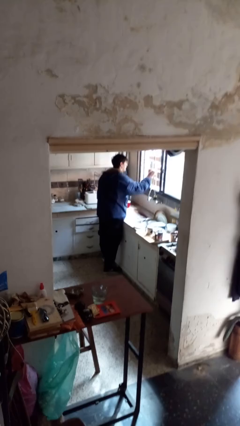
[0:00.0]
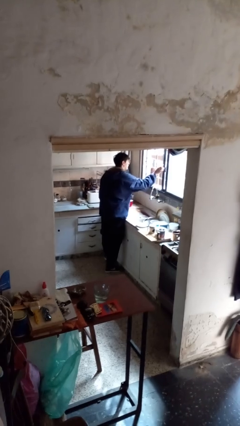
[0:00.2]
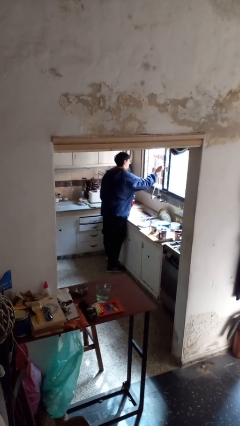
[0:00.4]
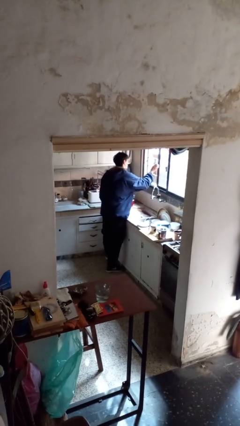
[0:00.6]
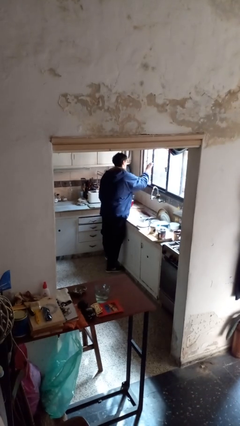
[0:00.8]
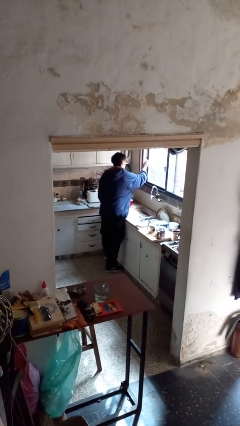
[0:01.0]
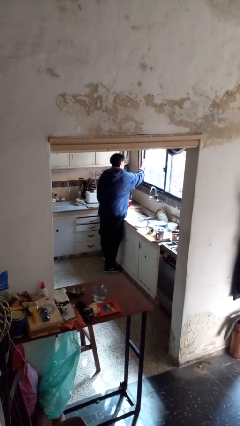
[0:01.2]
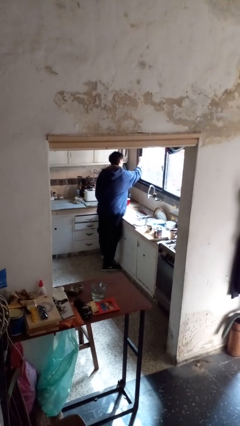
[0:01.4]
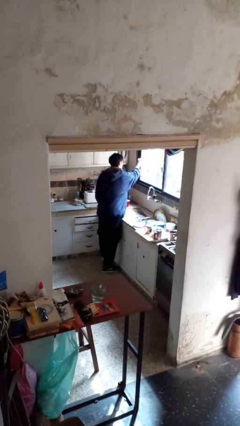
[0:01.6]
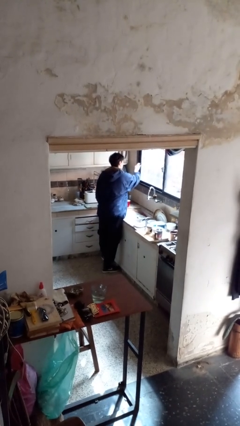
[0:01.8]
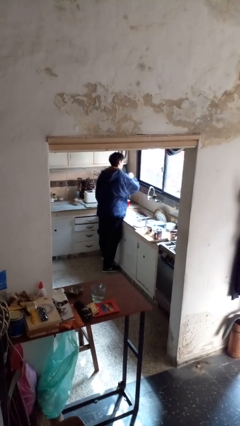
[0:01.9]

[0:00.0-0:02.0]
person closes home window

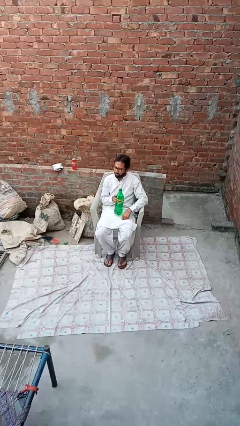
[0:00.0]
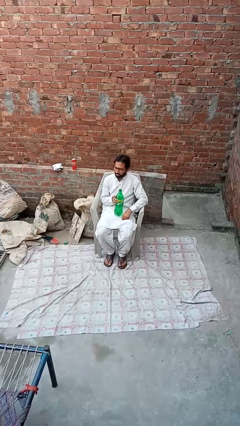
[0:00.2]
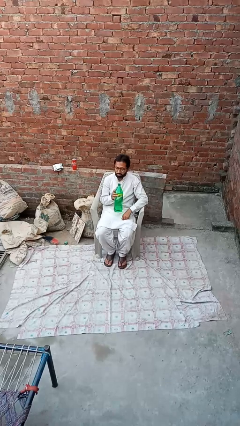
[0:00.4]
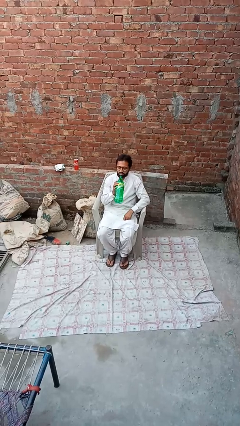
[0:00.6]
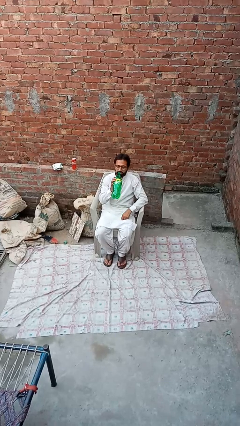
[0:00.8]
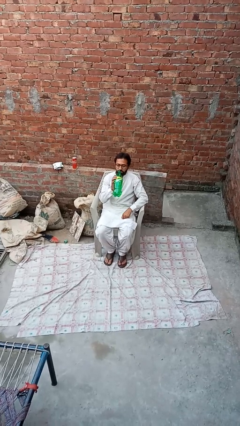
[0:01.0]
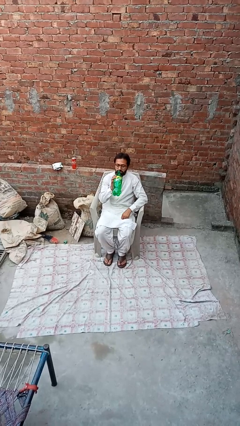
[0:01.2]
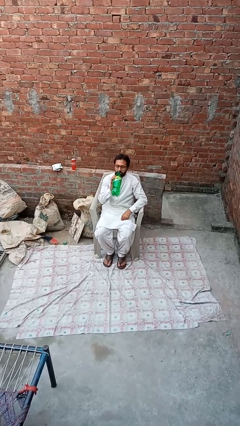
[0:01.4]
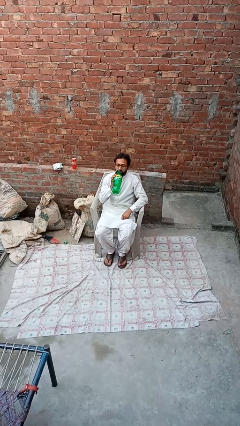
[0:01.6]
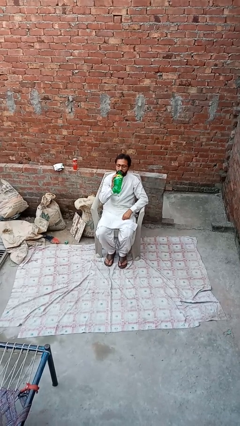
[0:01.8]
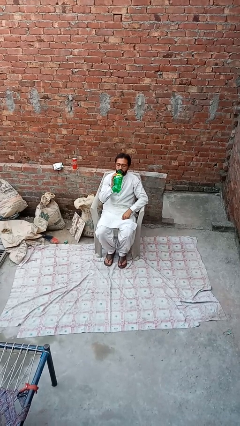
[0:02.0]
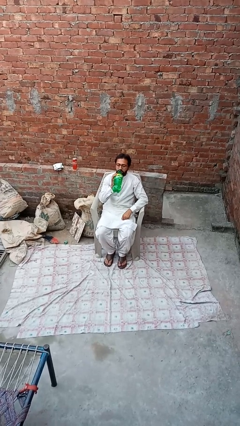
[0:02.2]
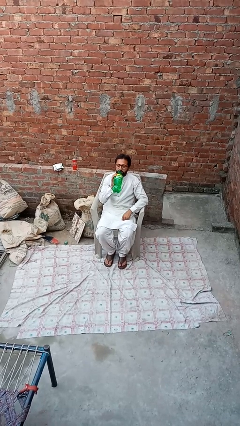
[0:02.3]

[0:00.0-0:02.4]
person drinks from bottle

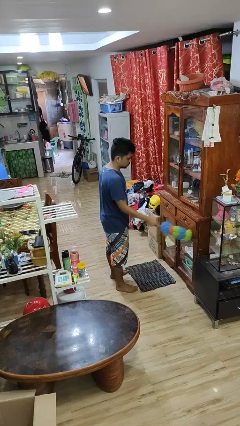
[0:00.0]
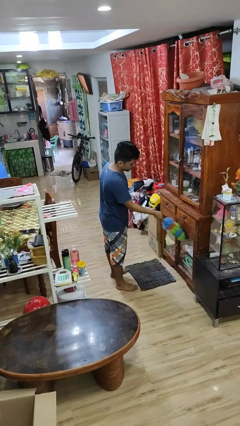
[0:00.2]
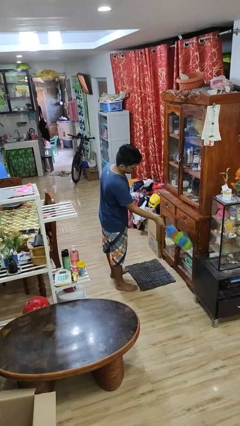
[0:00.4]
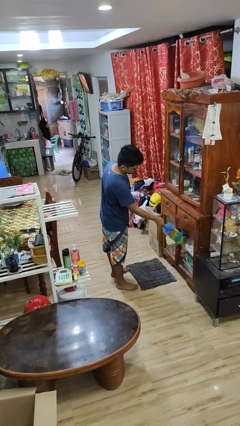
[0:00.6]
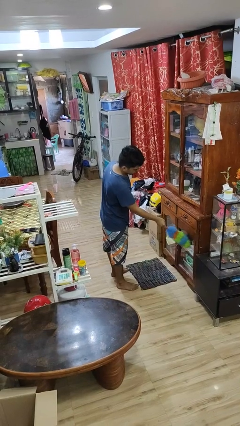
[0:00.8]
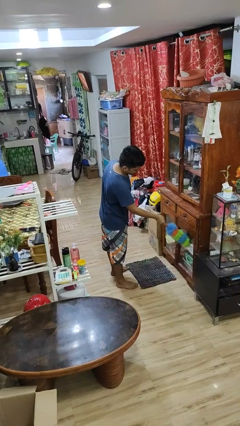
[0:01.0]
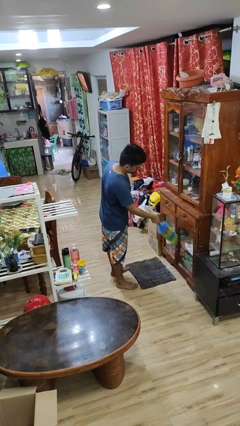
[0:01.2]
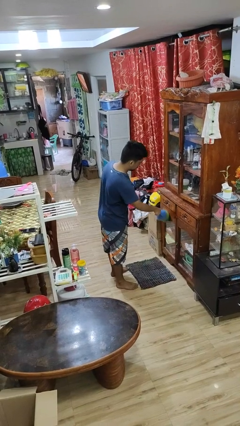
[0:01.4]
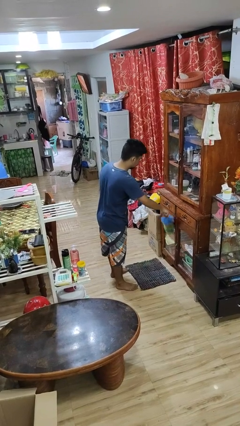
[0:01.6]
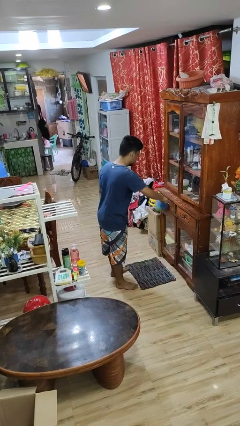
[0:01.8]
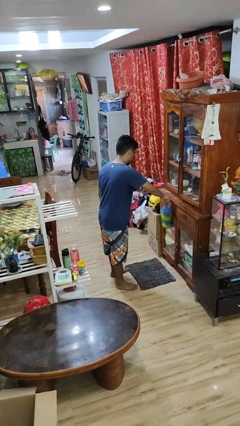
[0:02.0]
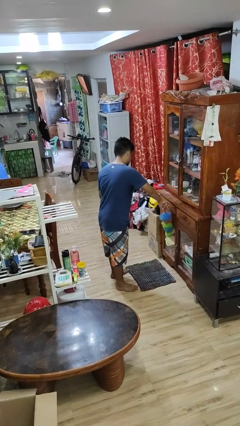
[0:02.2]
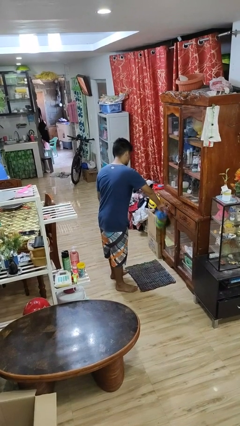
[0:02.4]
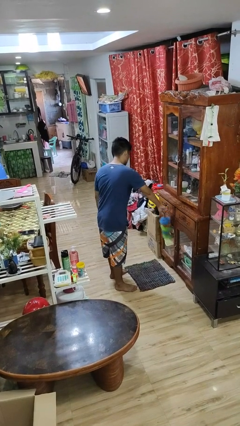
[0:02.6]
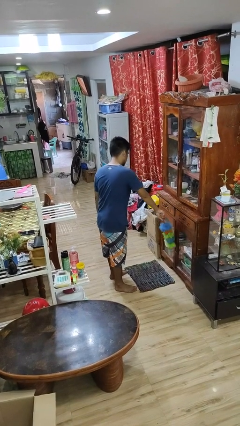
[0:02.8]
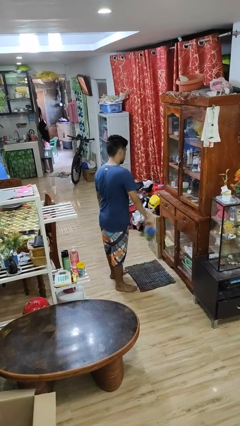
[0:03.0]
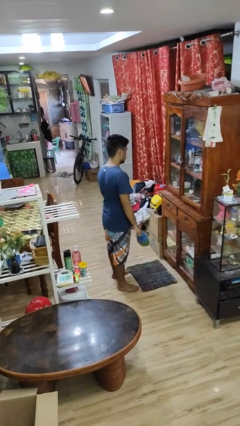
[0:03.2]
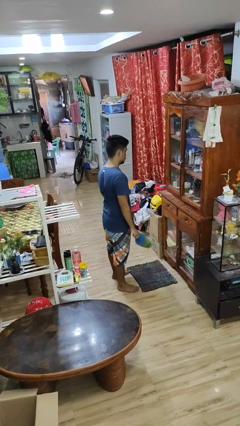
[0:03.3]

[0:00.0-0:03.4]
person dusts furniture

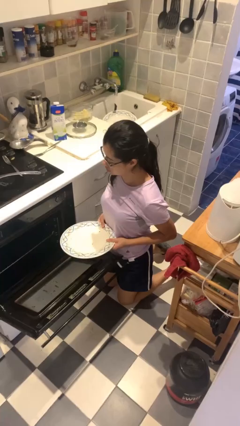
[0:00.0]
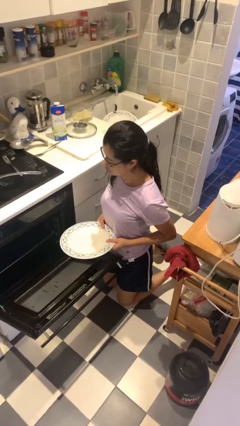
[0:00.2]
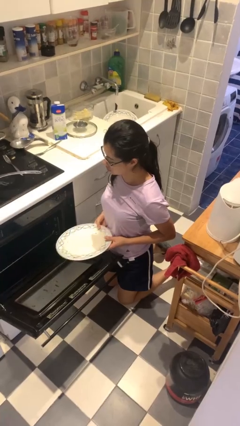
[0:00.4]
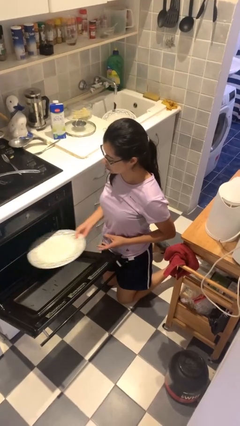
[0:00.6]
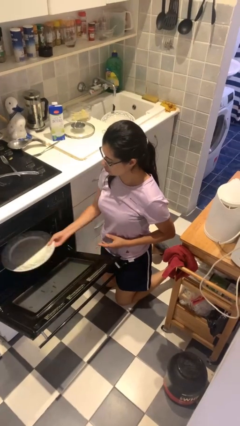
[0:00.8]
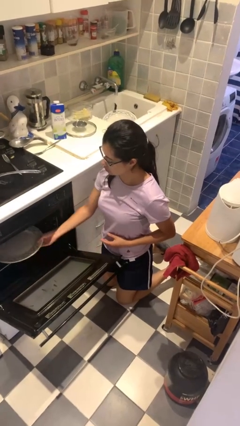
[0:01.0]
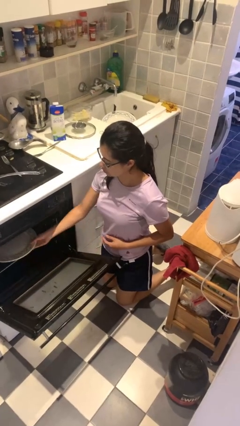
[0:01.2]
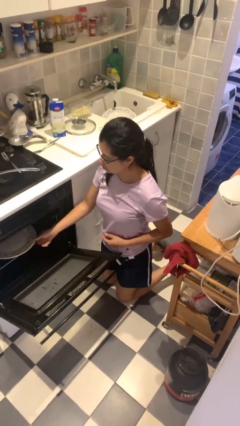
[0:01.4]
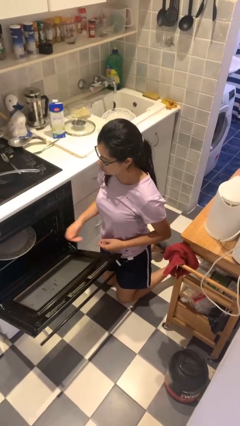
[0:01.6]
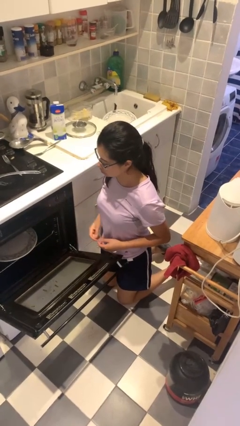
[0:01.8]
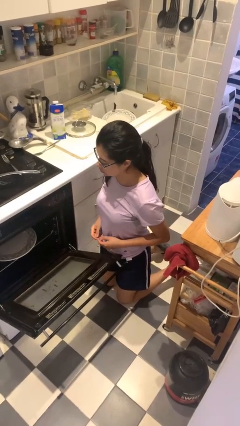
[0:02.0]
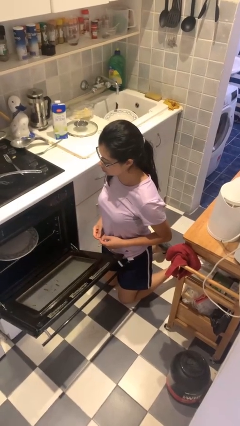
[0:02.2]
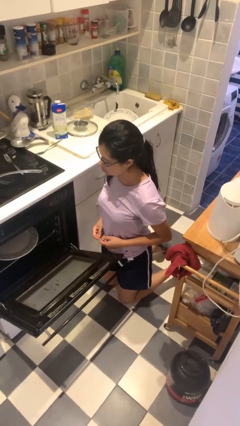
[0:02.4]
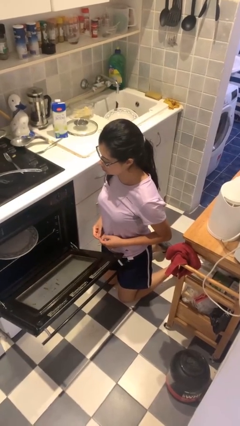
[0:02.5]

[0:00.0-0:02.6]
person loads dishwasher

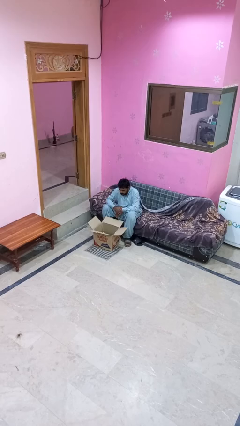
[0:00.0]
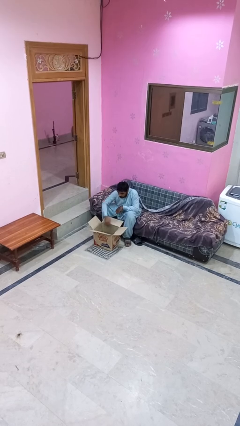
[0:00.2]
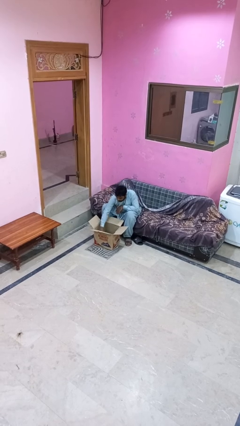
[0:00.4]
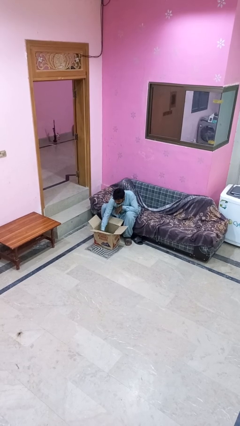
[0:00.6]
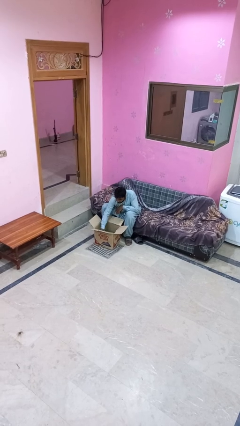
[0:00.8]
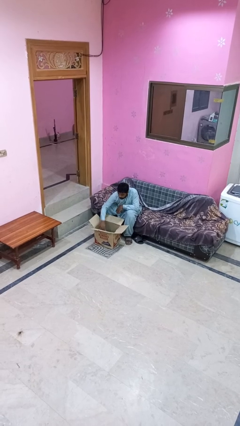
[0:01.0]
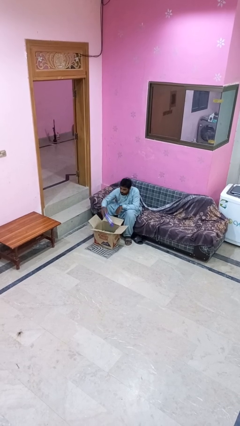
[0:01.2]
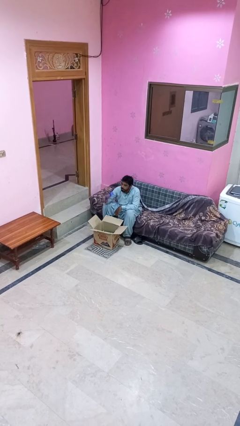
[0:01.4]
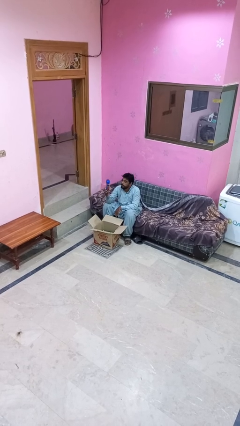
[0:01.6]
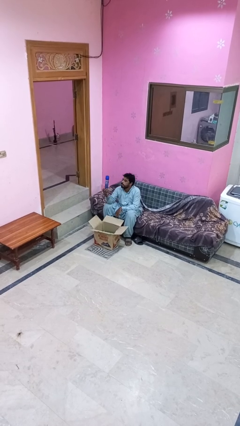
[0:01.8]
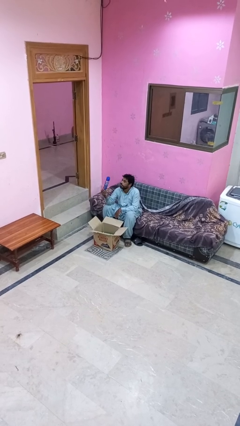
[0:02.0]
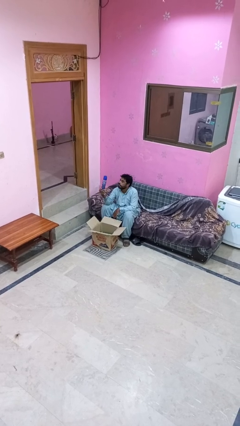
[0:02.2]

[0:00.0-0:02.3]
person takes object from box

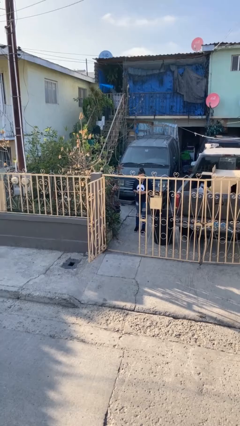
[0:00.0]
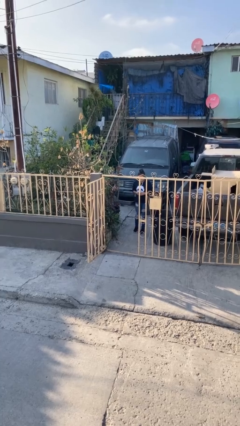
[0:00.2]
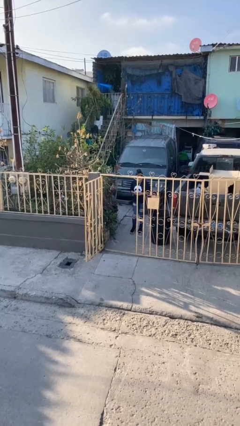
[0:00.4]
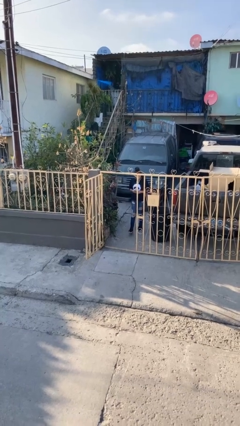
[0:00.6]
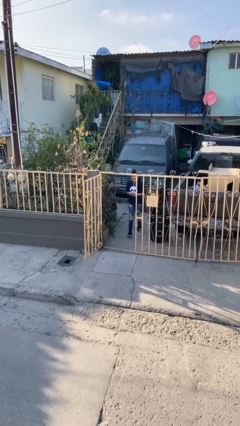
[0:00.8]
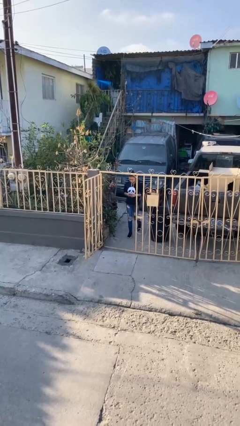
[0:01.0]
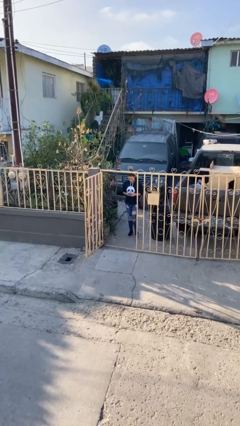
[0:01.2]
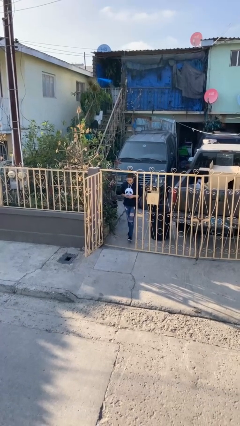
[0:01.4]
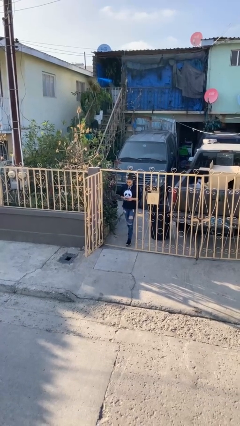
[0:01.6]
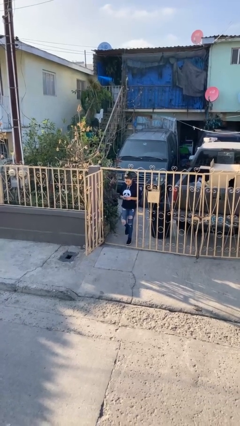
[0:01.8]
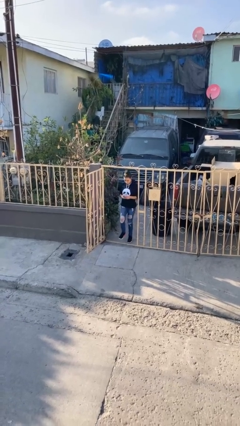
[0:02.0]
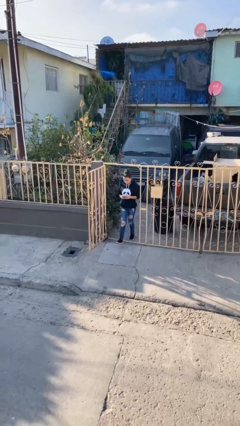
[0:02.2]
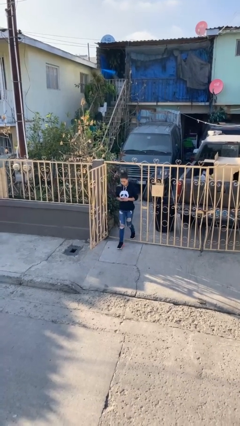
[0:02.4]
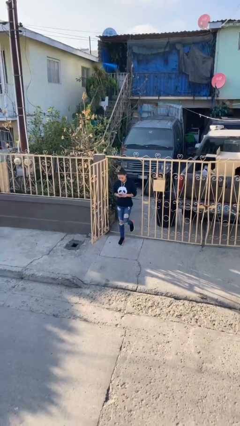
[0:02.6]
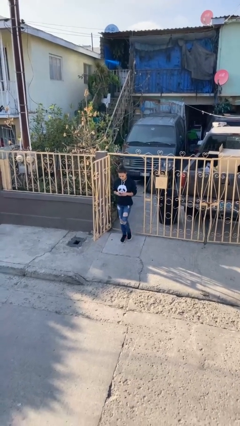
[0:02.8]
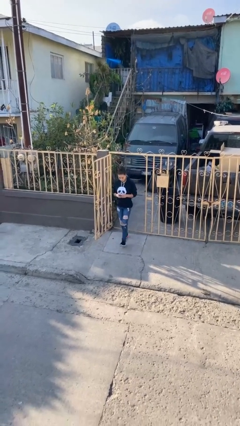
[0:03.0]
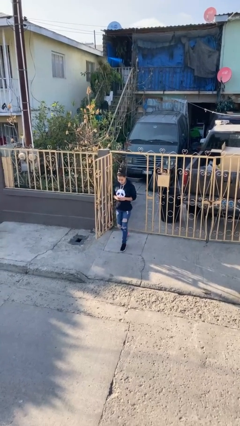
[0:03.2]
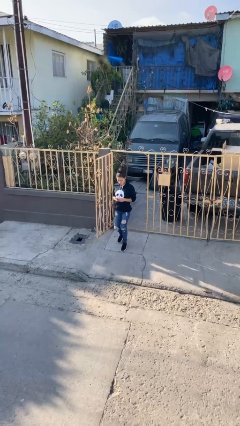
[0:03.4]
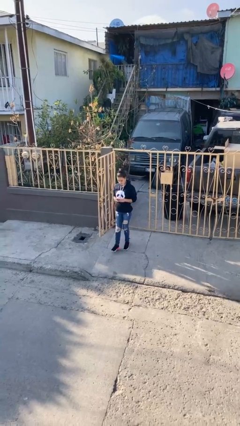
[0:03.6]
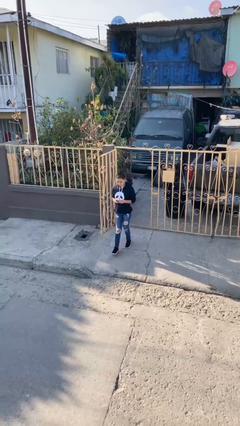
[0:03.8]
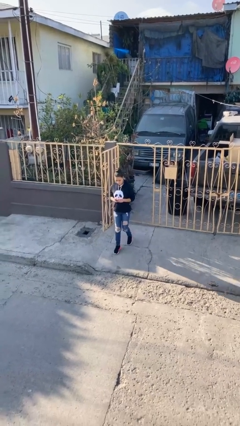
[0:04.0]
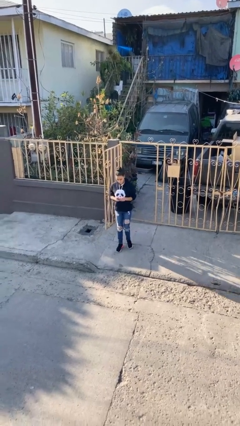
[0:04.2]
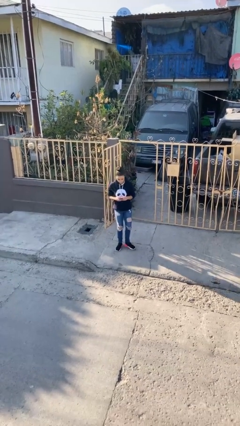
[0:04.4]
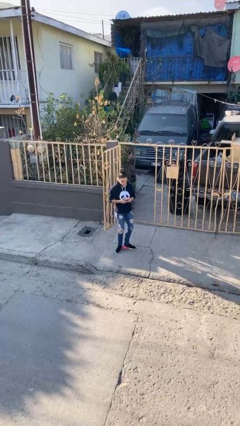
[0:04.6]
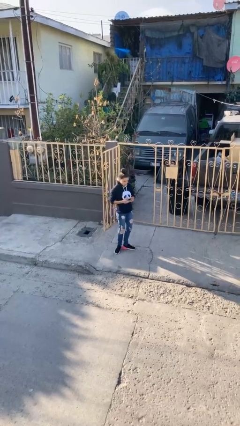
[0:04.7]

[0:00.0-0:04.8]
person enters scene through structure

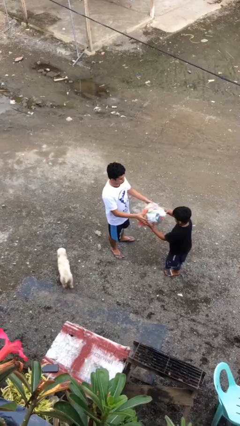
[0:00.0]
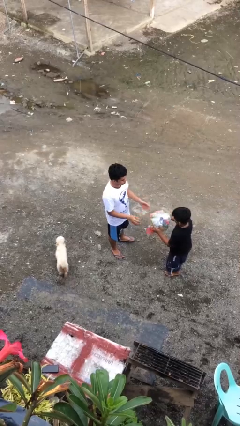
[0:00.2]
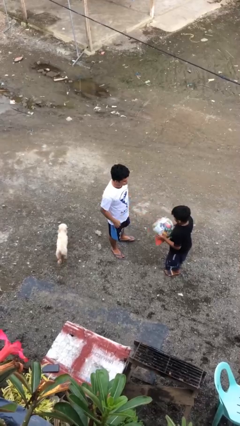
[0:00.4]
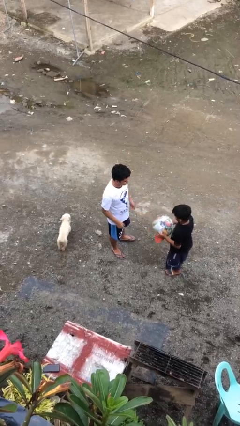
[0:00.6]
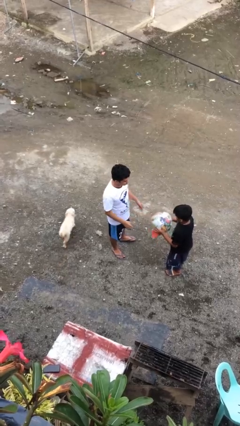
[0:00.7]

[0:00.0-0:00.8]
person transfers object to person
